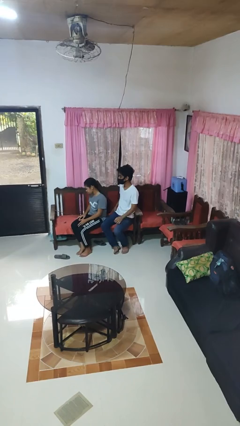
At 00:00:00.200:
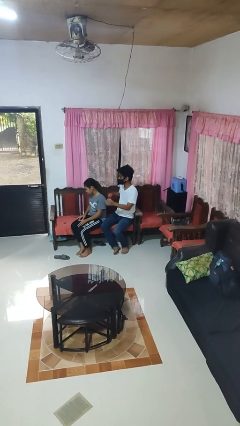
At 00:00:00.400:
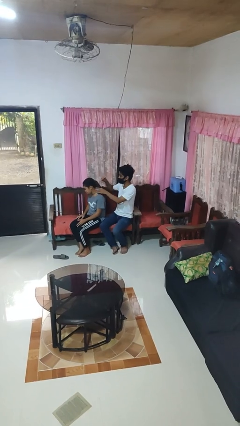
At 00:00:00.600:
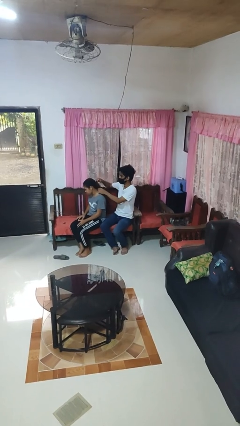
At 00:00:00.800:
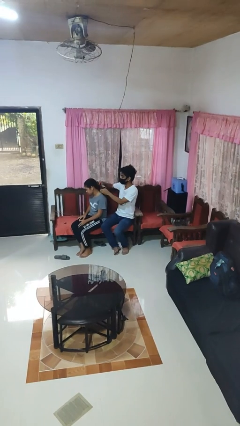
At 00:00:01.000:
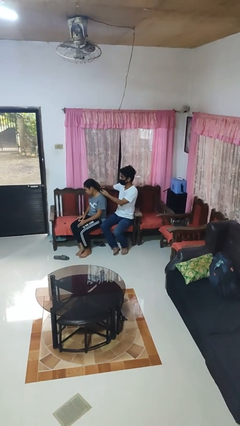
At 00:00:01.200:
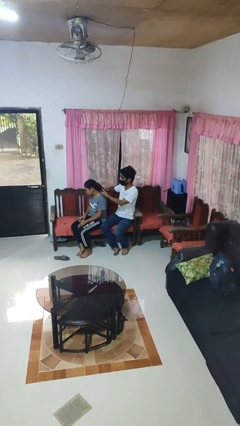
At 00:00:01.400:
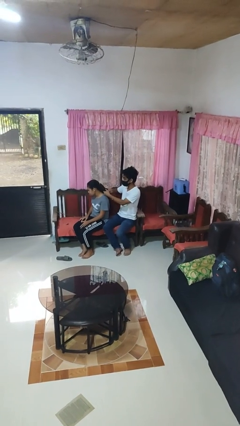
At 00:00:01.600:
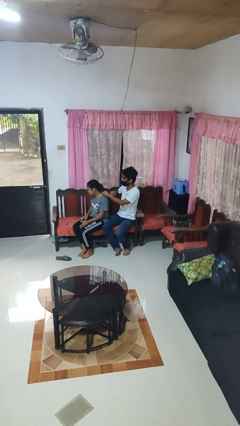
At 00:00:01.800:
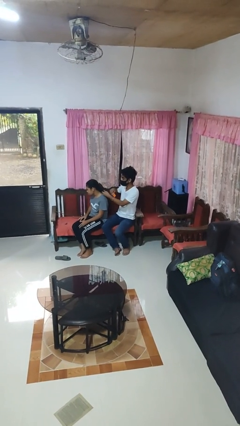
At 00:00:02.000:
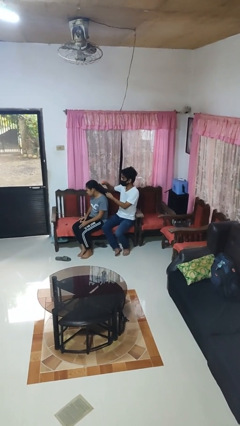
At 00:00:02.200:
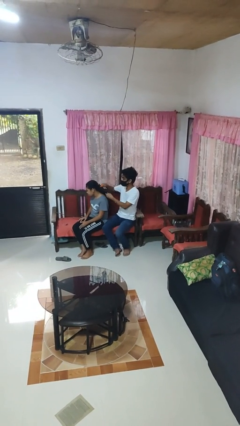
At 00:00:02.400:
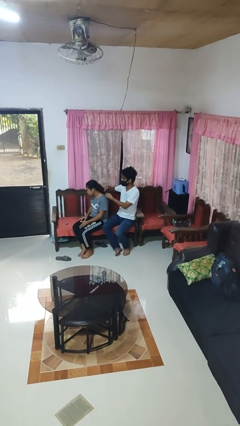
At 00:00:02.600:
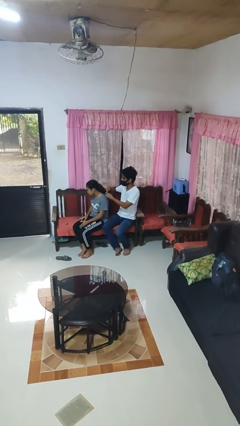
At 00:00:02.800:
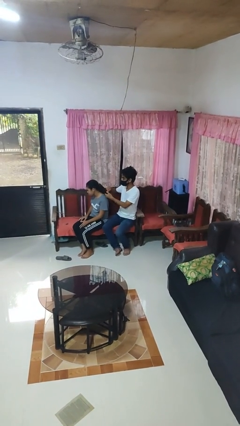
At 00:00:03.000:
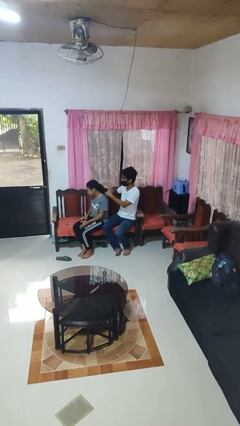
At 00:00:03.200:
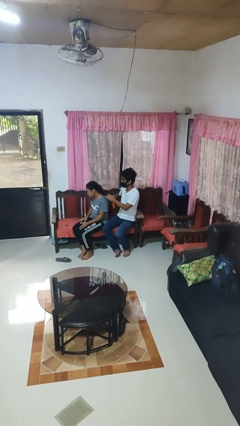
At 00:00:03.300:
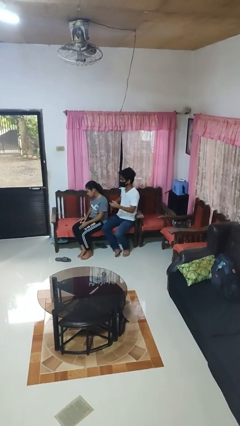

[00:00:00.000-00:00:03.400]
person brushes hair of person

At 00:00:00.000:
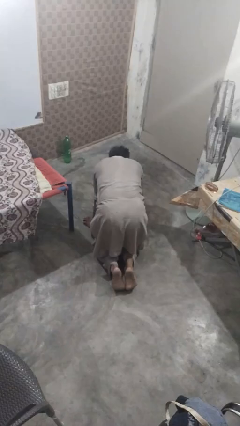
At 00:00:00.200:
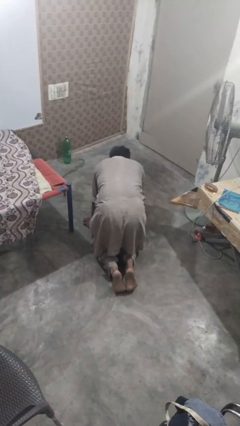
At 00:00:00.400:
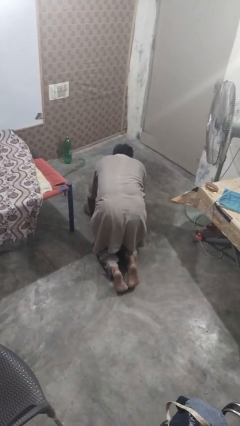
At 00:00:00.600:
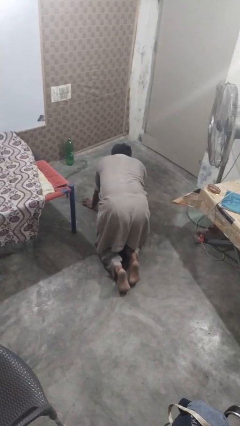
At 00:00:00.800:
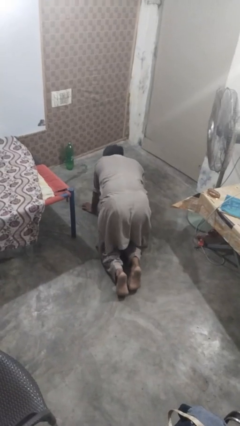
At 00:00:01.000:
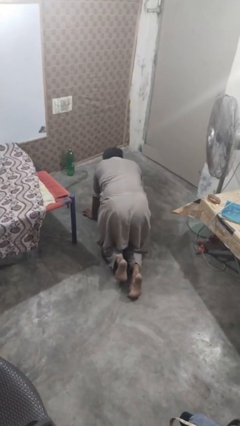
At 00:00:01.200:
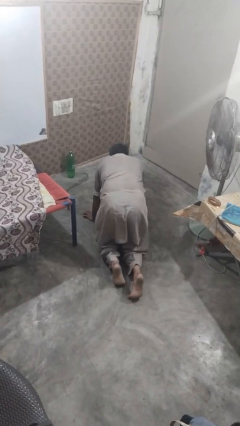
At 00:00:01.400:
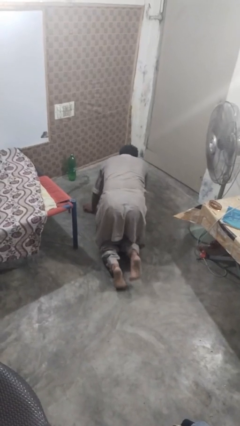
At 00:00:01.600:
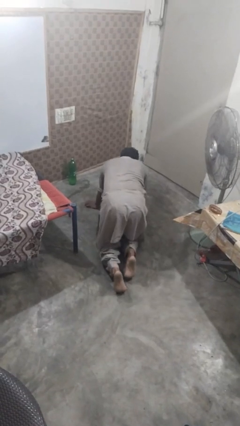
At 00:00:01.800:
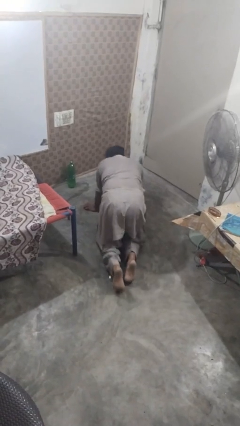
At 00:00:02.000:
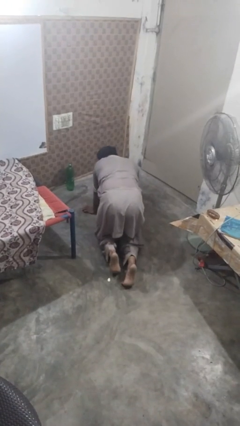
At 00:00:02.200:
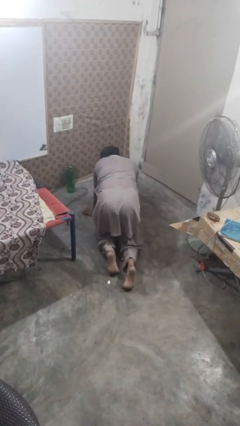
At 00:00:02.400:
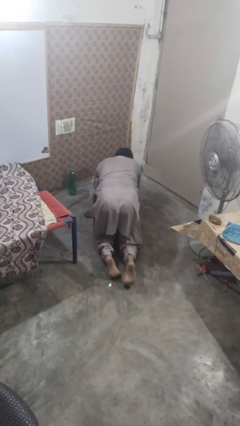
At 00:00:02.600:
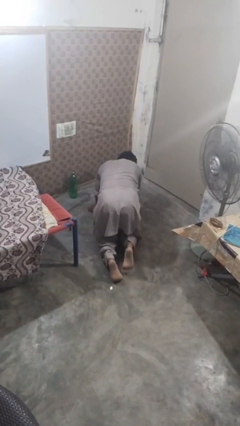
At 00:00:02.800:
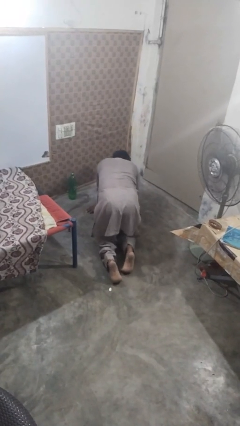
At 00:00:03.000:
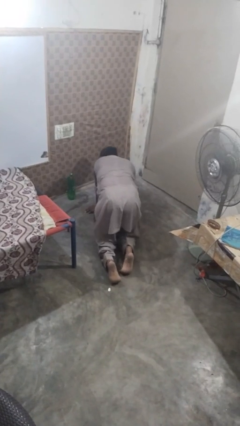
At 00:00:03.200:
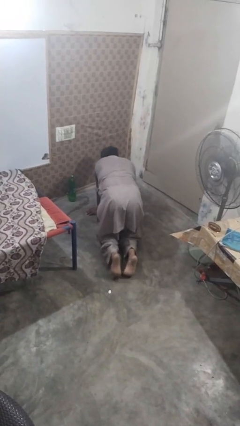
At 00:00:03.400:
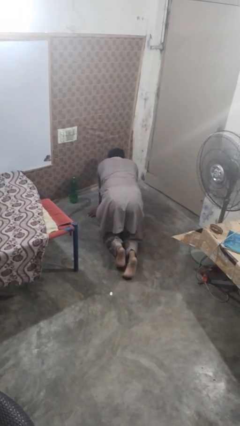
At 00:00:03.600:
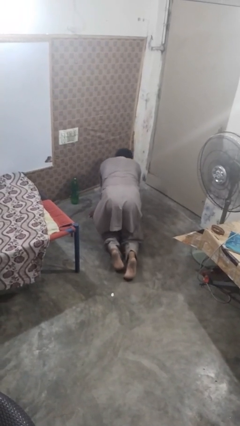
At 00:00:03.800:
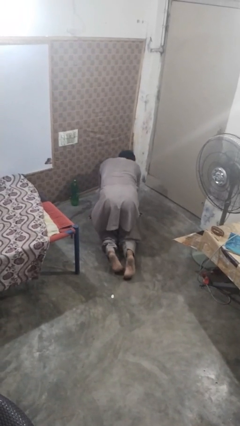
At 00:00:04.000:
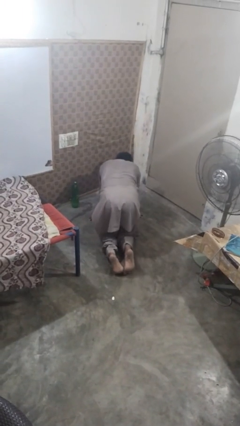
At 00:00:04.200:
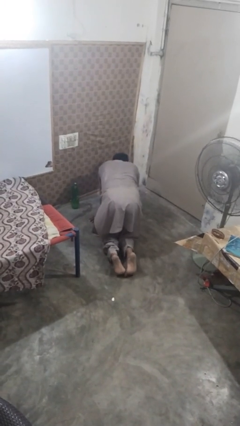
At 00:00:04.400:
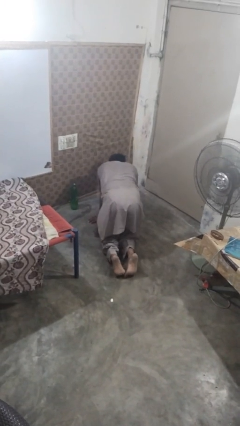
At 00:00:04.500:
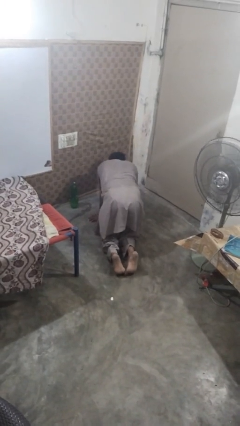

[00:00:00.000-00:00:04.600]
person crawls

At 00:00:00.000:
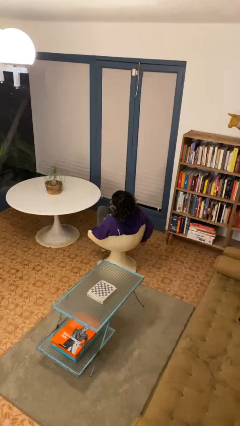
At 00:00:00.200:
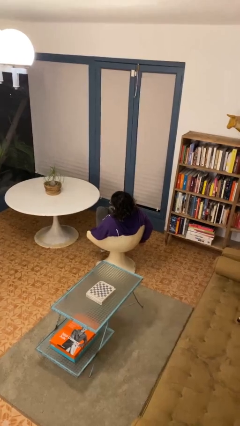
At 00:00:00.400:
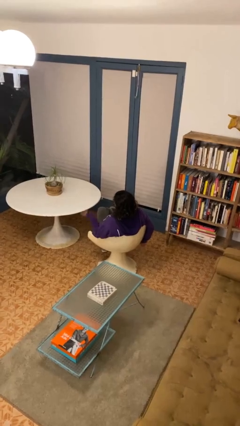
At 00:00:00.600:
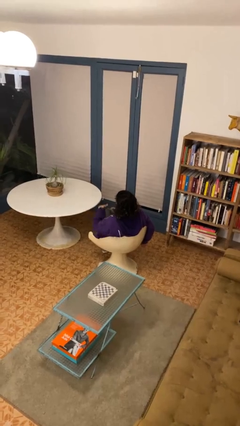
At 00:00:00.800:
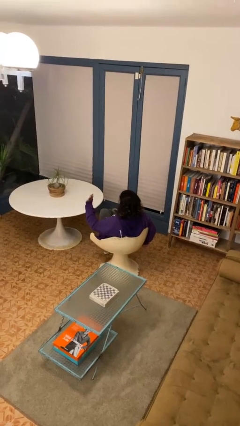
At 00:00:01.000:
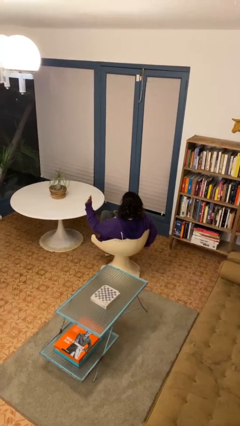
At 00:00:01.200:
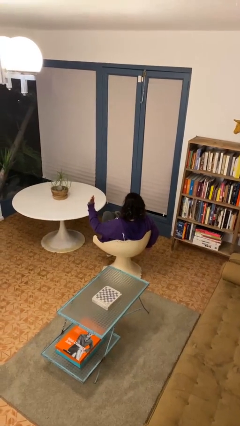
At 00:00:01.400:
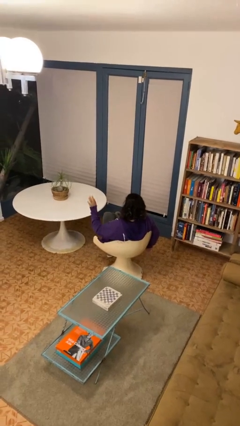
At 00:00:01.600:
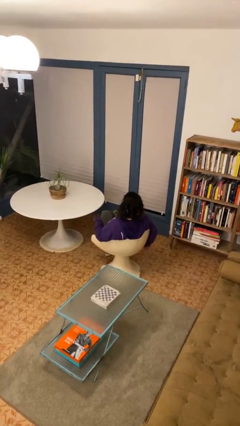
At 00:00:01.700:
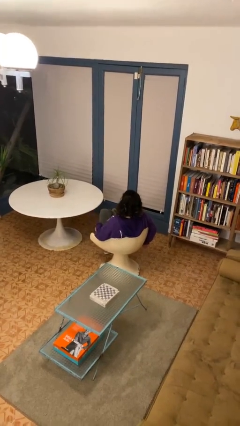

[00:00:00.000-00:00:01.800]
person gestures stop

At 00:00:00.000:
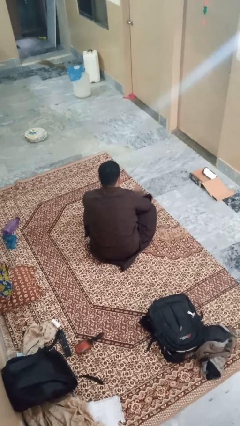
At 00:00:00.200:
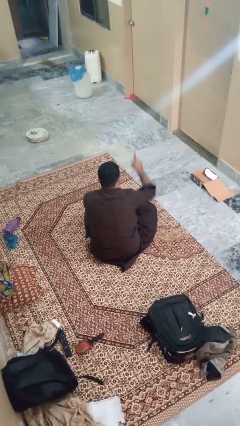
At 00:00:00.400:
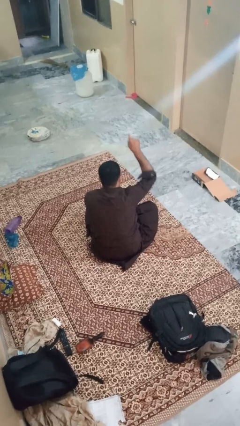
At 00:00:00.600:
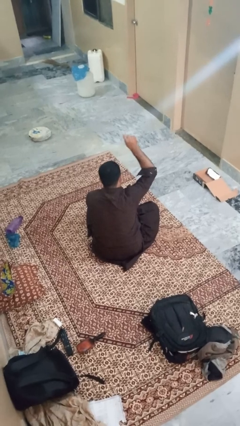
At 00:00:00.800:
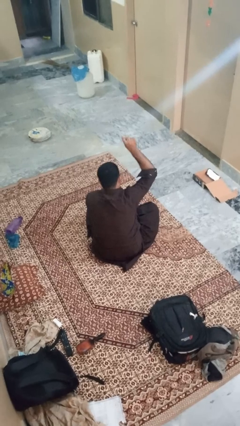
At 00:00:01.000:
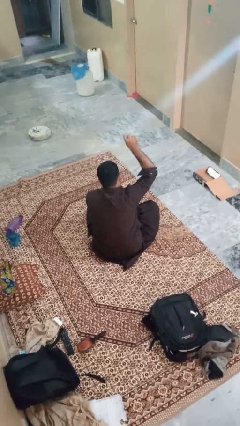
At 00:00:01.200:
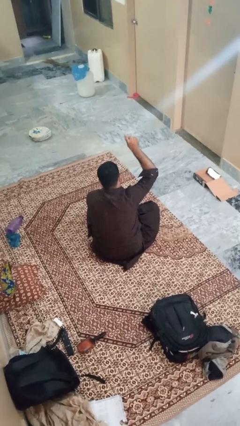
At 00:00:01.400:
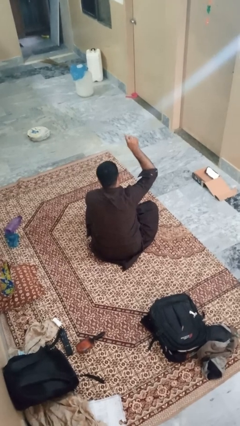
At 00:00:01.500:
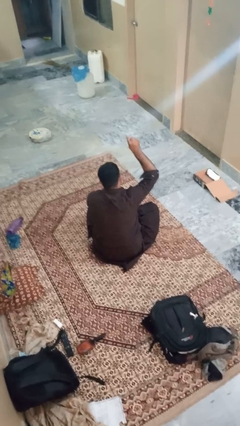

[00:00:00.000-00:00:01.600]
person gestures number one

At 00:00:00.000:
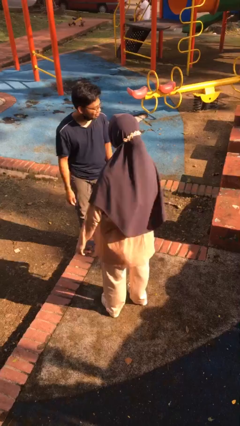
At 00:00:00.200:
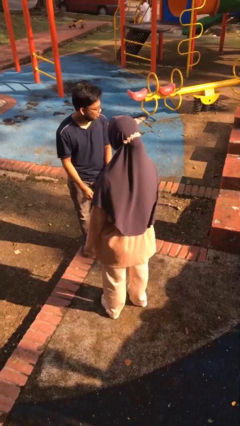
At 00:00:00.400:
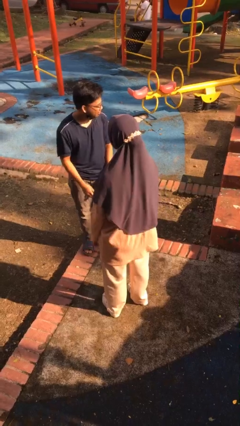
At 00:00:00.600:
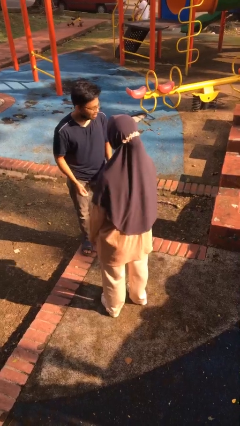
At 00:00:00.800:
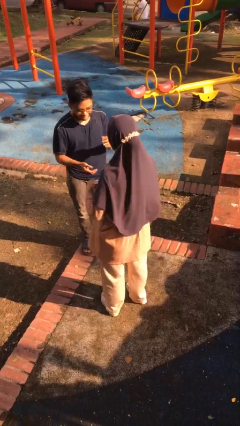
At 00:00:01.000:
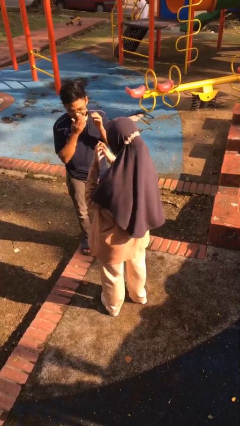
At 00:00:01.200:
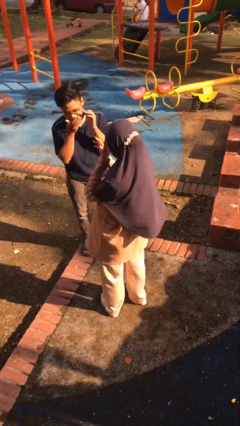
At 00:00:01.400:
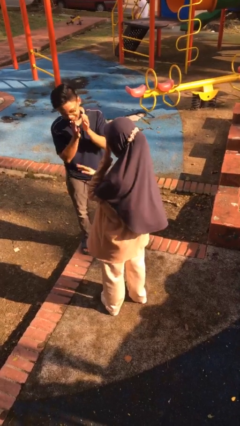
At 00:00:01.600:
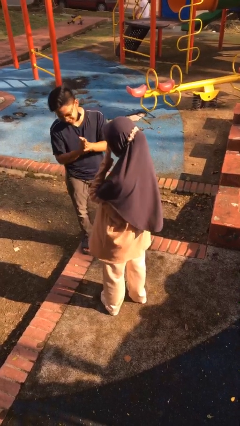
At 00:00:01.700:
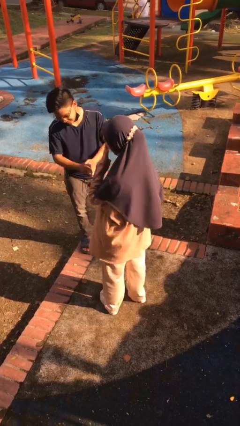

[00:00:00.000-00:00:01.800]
person laughs with person

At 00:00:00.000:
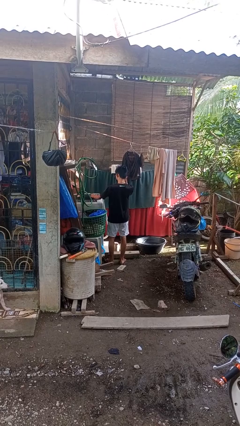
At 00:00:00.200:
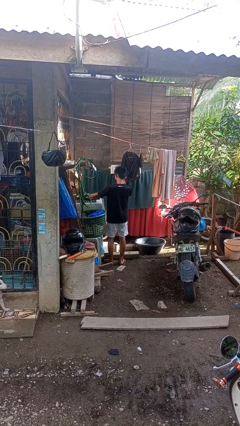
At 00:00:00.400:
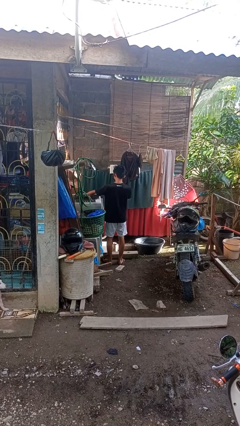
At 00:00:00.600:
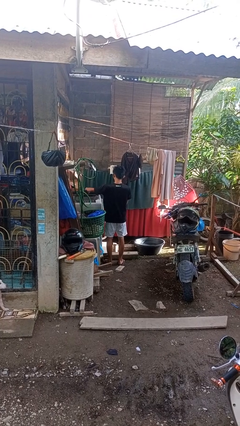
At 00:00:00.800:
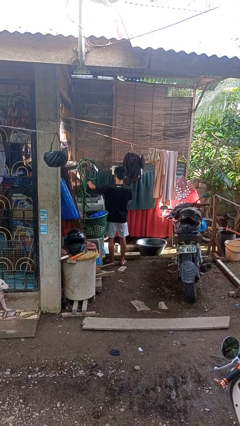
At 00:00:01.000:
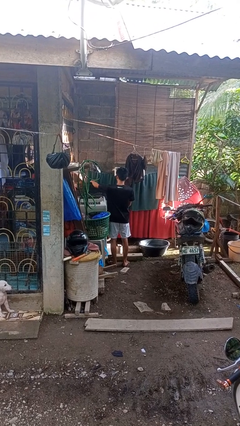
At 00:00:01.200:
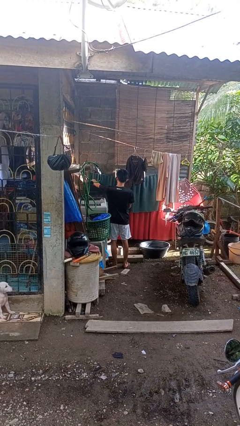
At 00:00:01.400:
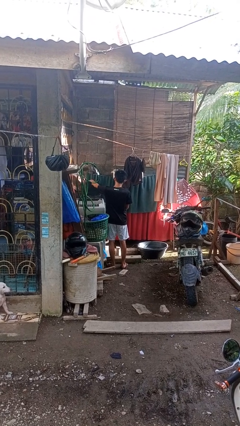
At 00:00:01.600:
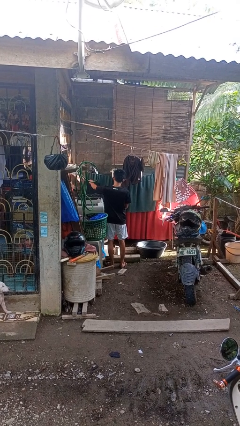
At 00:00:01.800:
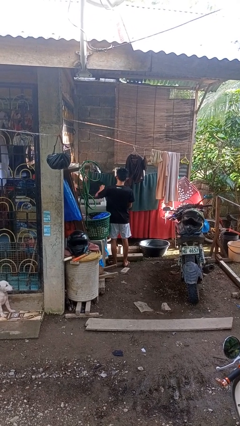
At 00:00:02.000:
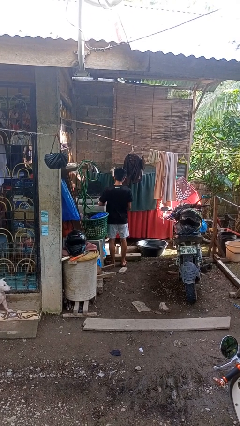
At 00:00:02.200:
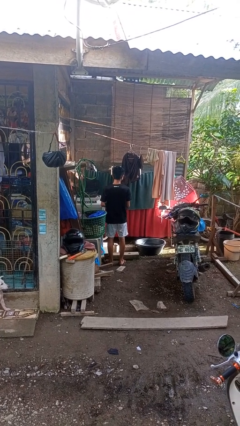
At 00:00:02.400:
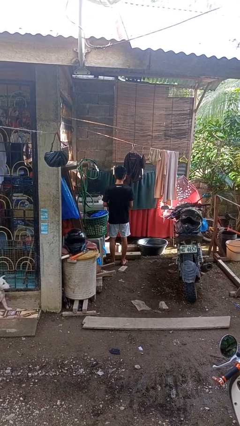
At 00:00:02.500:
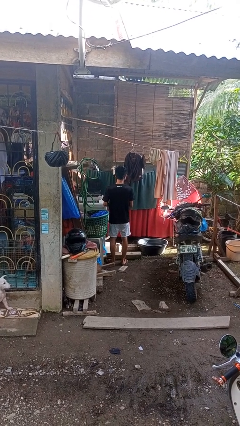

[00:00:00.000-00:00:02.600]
person opens clothes washer

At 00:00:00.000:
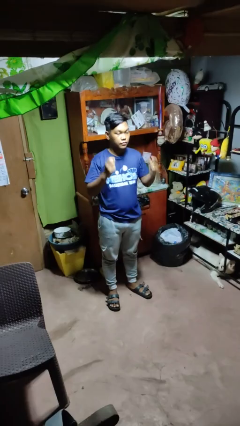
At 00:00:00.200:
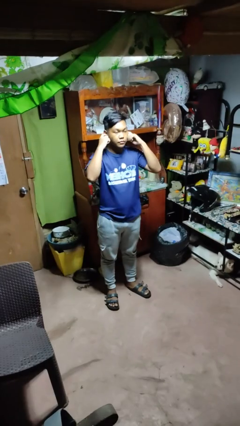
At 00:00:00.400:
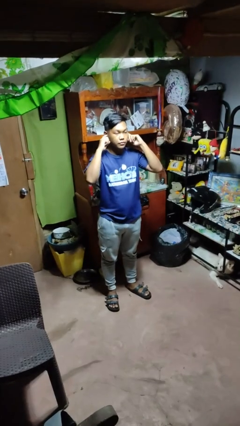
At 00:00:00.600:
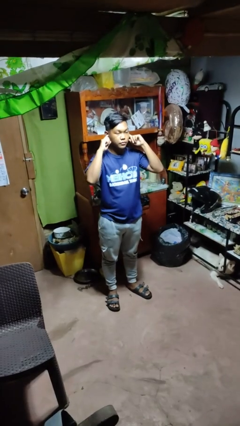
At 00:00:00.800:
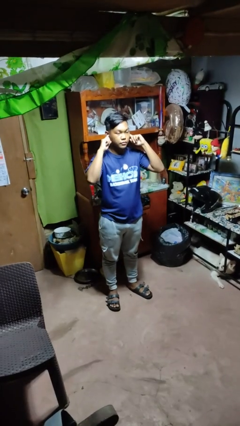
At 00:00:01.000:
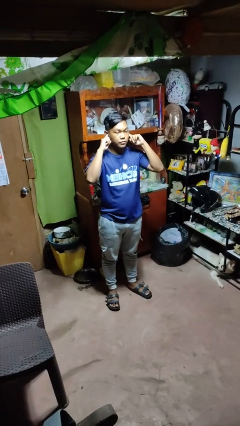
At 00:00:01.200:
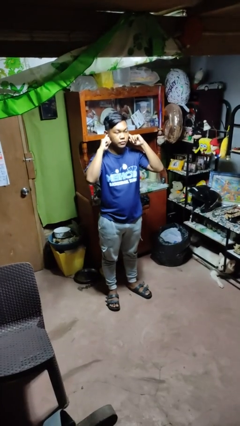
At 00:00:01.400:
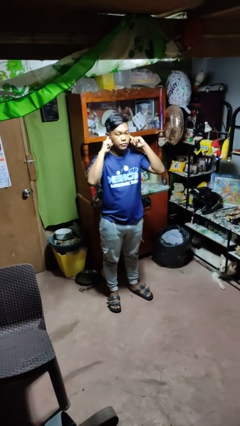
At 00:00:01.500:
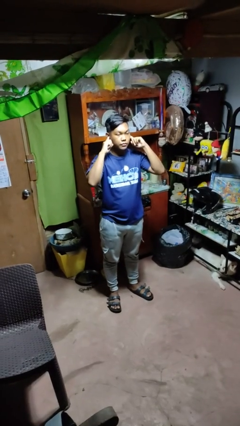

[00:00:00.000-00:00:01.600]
person puts fingers in ear
